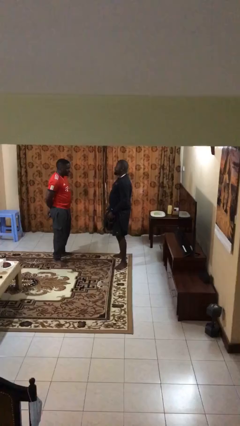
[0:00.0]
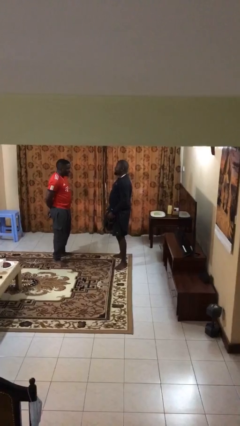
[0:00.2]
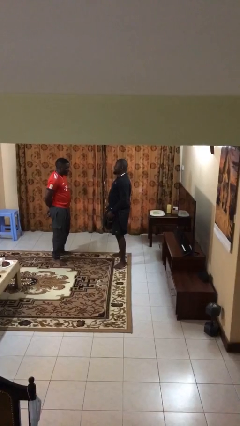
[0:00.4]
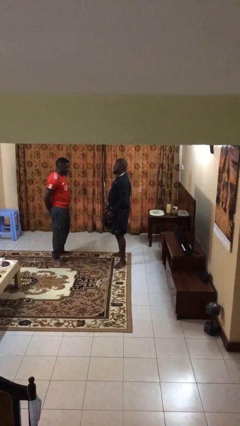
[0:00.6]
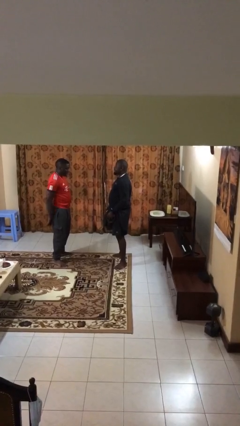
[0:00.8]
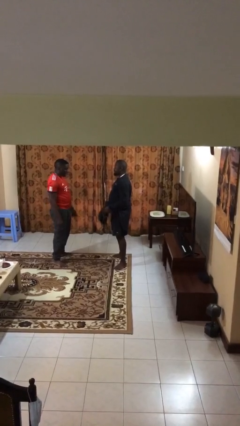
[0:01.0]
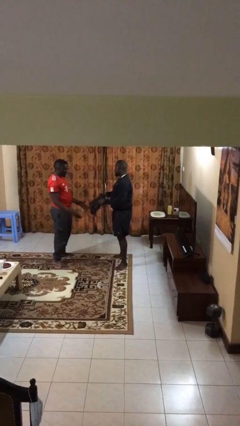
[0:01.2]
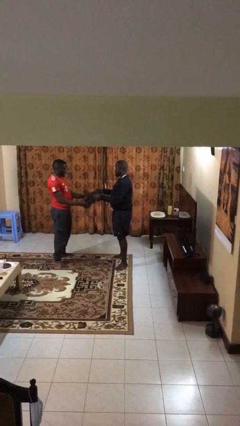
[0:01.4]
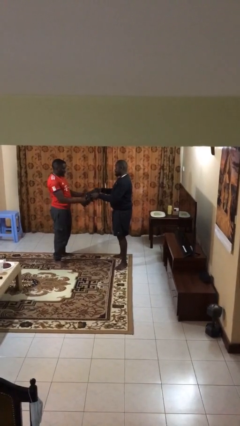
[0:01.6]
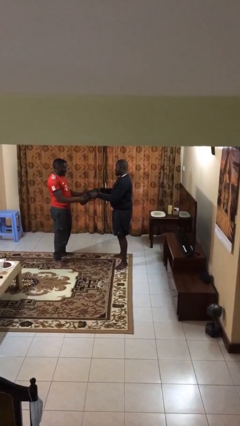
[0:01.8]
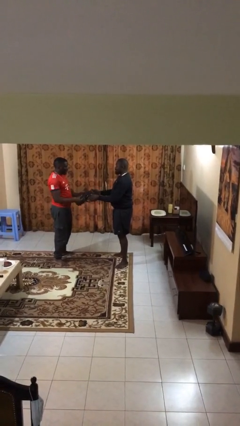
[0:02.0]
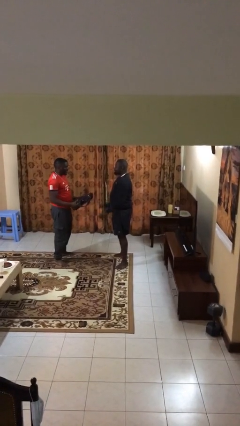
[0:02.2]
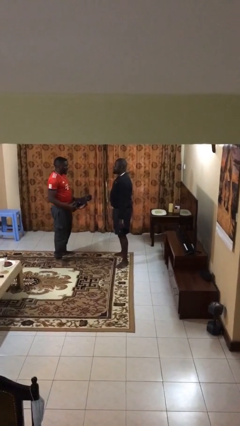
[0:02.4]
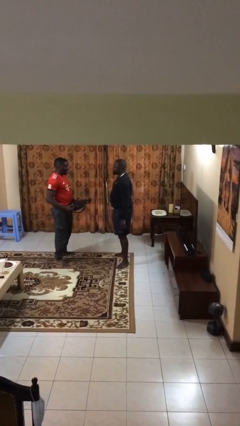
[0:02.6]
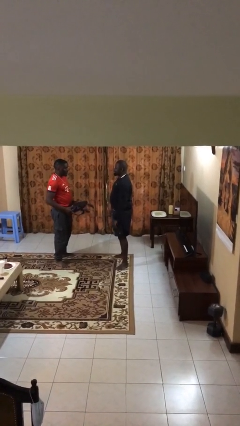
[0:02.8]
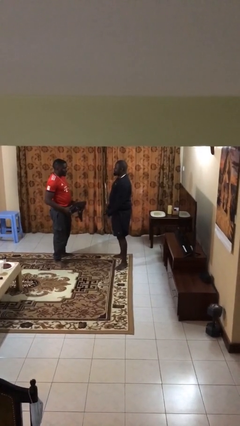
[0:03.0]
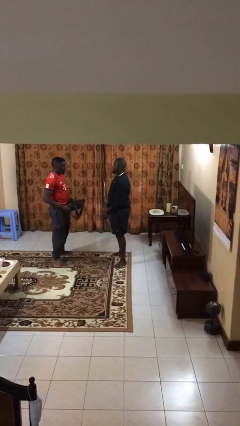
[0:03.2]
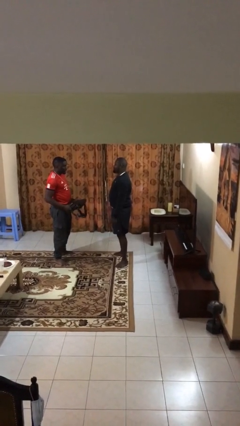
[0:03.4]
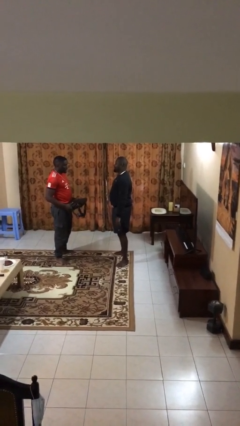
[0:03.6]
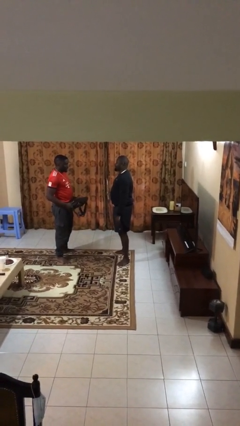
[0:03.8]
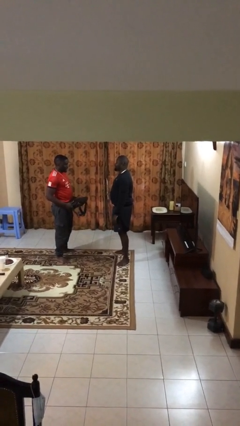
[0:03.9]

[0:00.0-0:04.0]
person transfers object to person

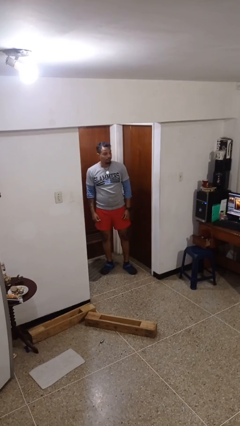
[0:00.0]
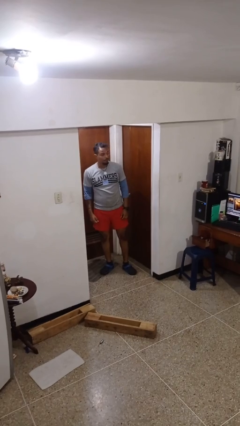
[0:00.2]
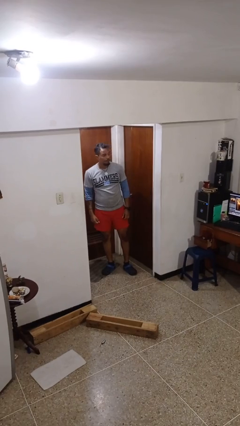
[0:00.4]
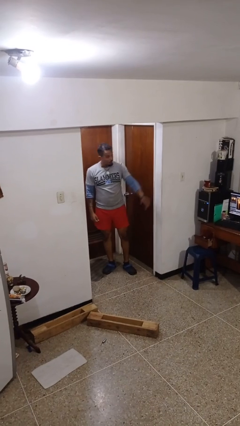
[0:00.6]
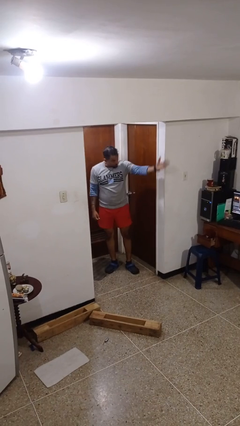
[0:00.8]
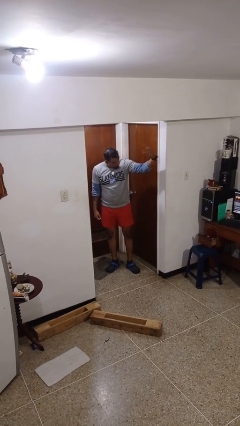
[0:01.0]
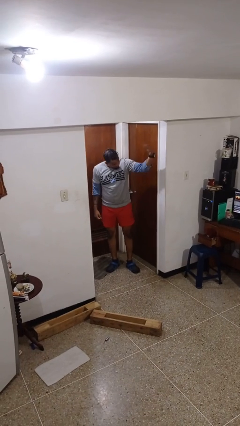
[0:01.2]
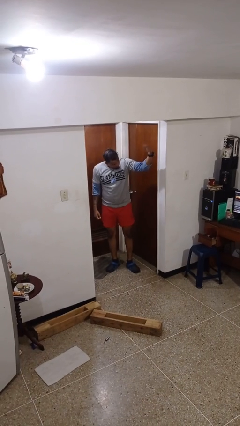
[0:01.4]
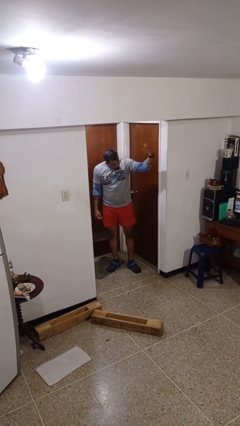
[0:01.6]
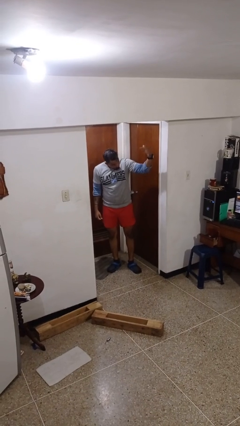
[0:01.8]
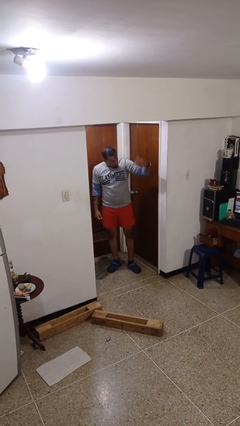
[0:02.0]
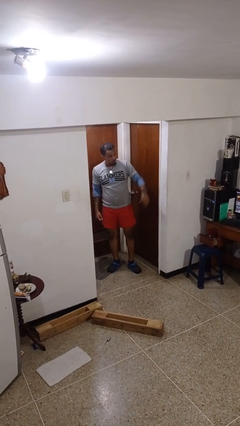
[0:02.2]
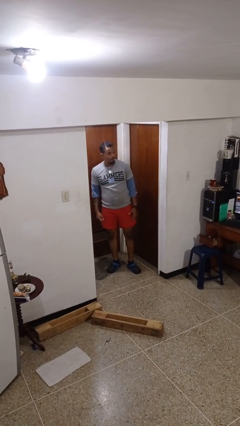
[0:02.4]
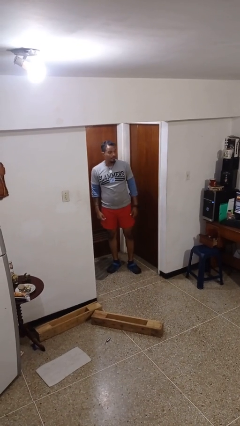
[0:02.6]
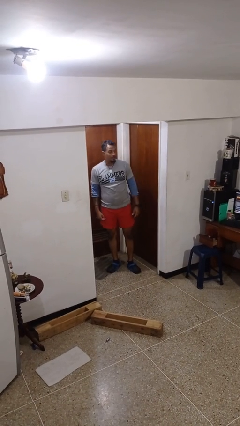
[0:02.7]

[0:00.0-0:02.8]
person gestures come here

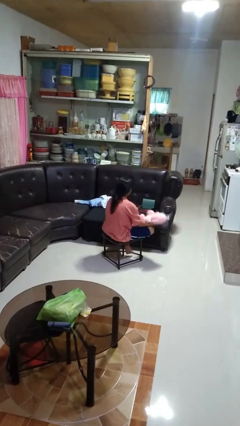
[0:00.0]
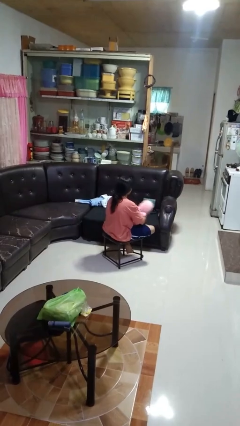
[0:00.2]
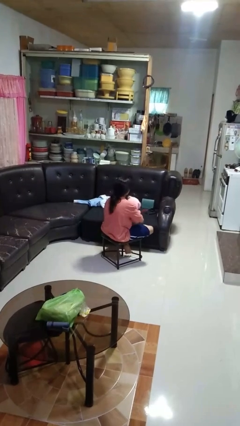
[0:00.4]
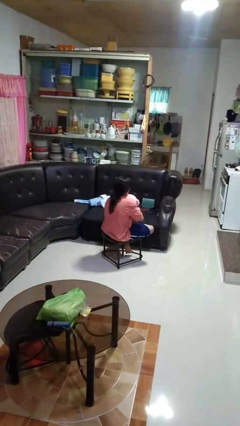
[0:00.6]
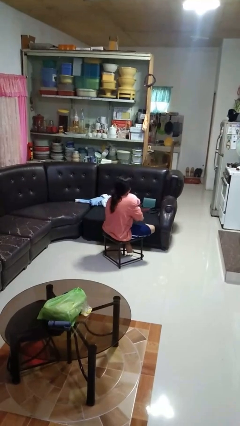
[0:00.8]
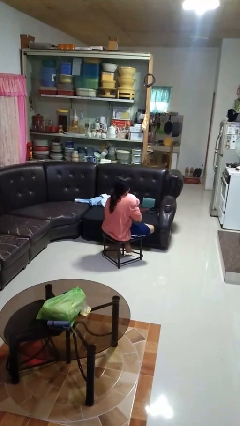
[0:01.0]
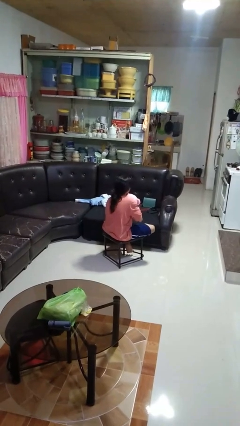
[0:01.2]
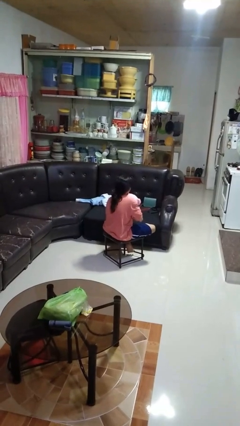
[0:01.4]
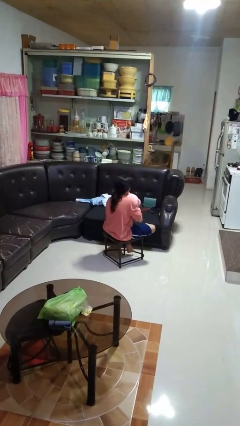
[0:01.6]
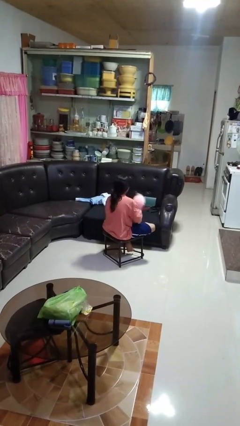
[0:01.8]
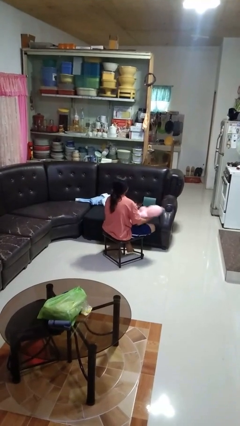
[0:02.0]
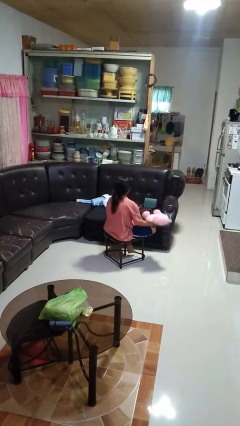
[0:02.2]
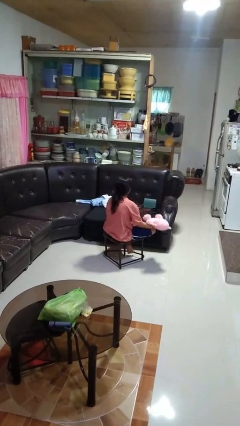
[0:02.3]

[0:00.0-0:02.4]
person hugs stuffed animal

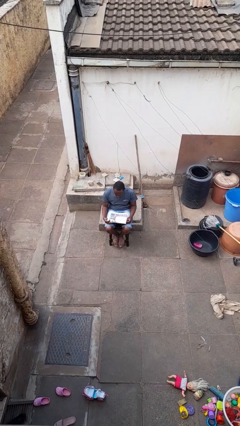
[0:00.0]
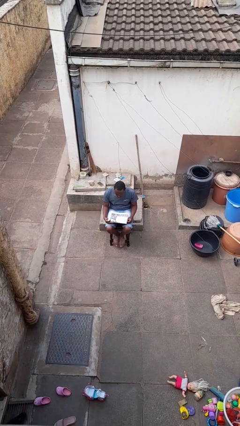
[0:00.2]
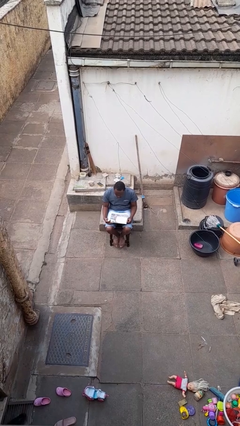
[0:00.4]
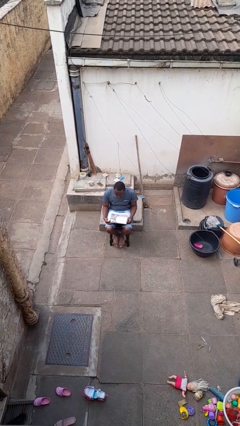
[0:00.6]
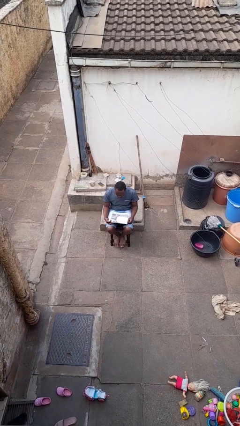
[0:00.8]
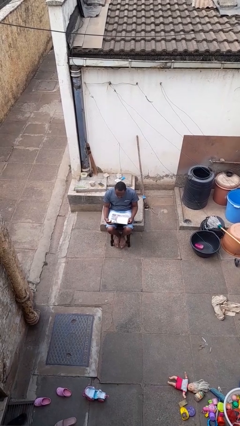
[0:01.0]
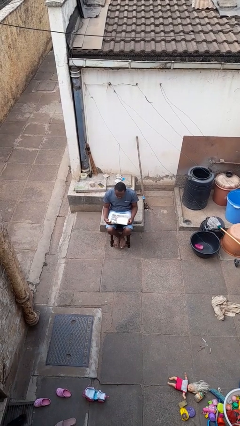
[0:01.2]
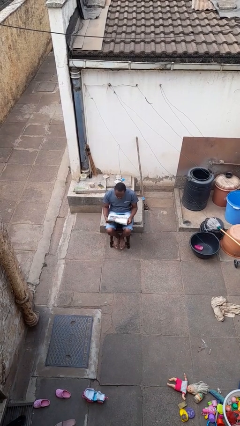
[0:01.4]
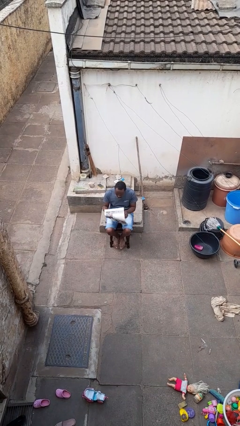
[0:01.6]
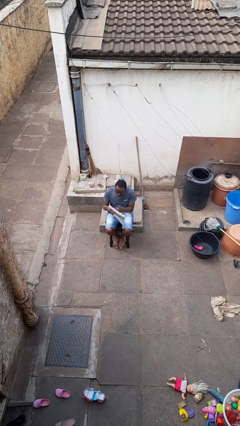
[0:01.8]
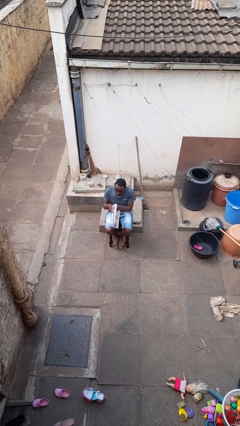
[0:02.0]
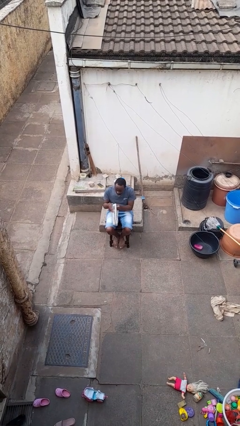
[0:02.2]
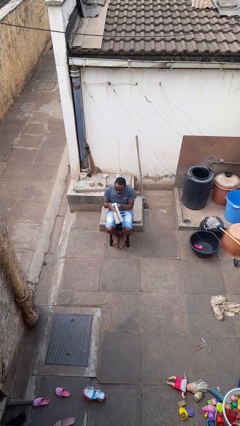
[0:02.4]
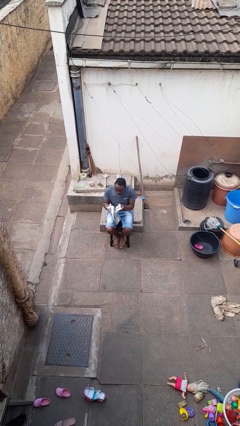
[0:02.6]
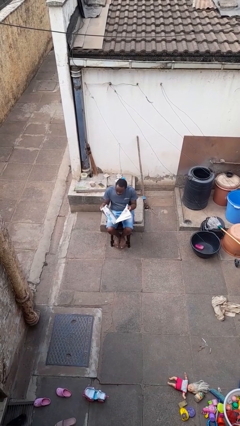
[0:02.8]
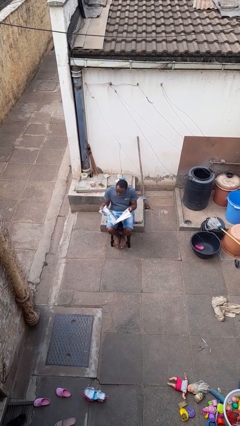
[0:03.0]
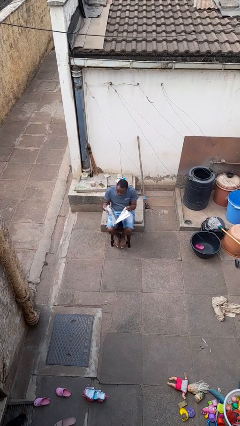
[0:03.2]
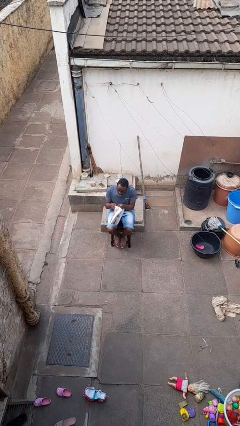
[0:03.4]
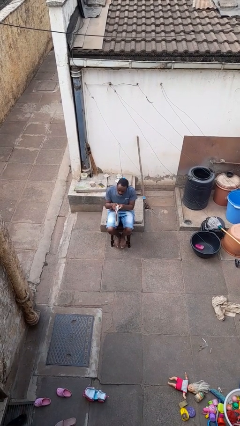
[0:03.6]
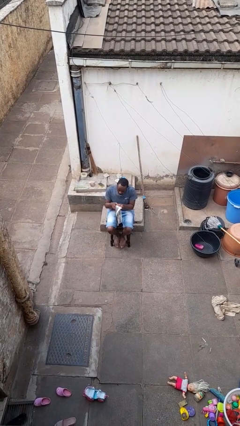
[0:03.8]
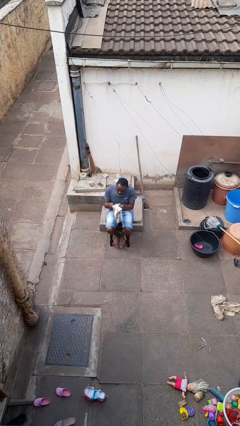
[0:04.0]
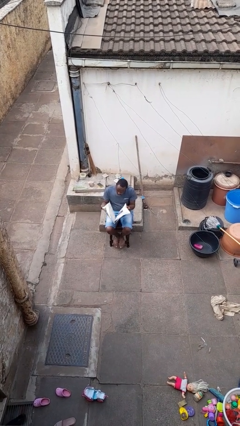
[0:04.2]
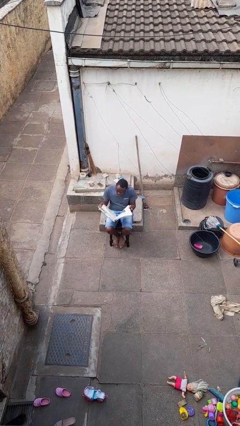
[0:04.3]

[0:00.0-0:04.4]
person reads newspaper

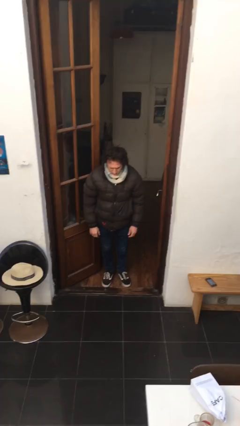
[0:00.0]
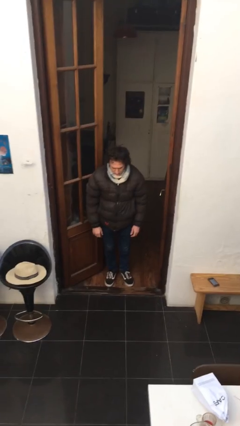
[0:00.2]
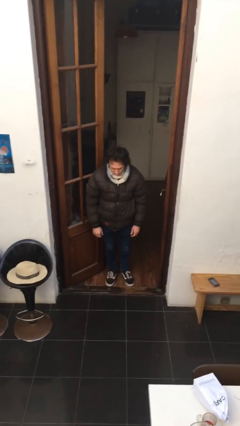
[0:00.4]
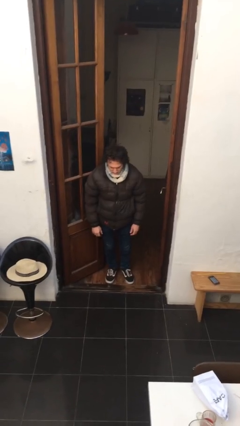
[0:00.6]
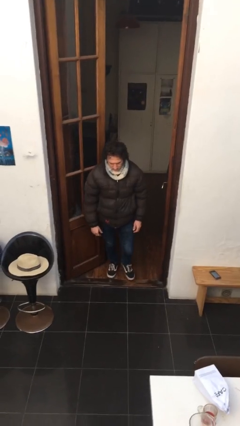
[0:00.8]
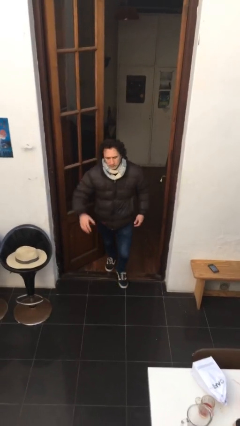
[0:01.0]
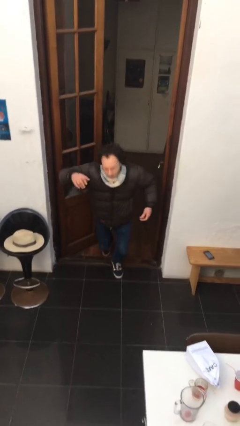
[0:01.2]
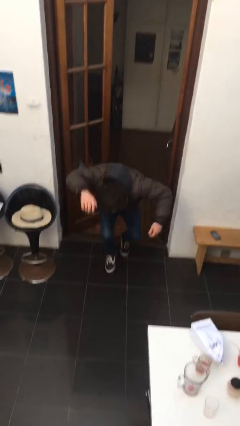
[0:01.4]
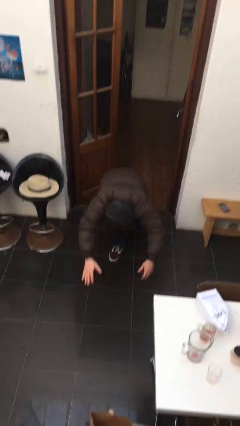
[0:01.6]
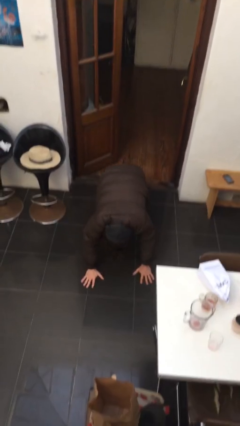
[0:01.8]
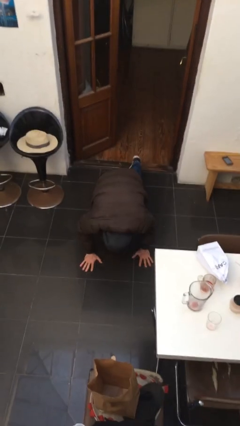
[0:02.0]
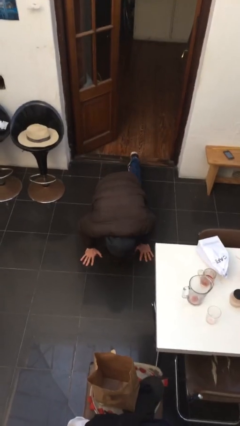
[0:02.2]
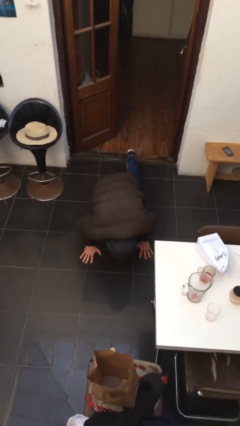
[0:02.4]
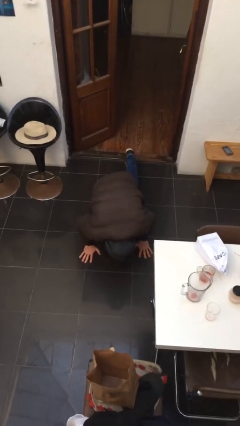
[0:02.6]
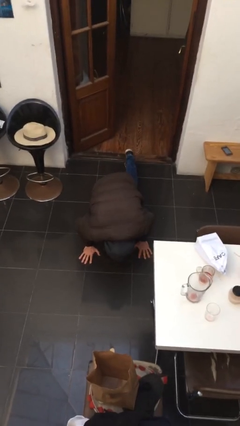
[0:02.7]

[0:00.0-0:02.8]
person trips on object on floor

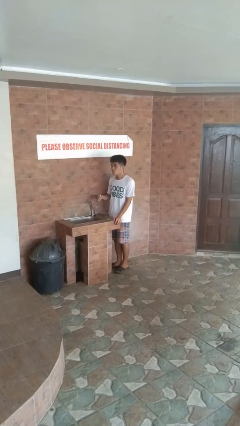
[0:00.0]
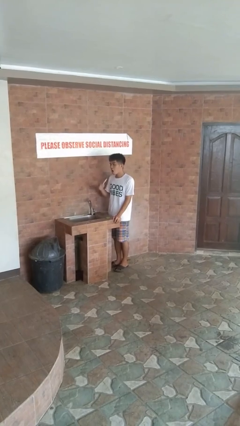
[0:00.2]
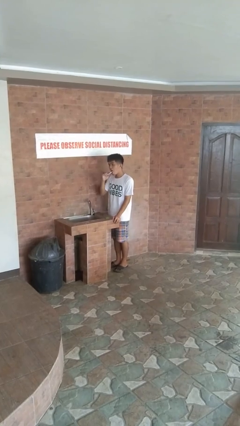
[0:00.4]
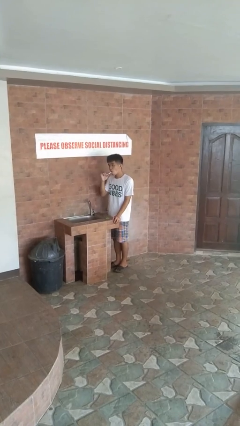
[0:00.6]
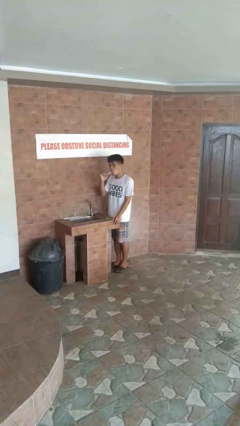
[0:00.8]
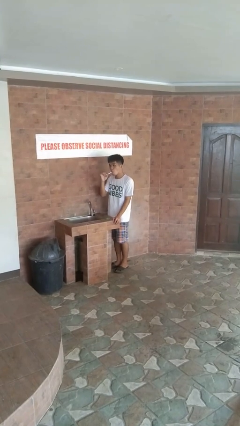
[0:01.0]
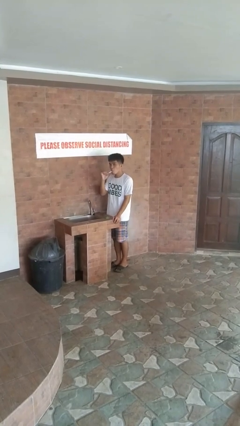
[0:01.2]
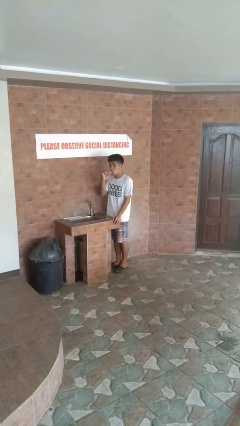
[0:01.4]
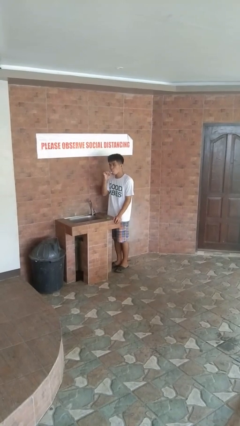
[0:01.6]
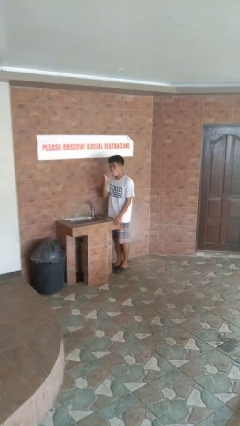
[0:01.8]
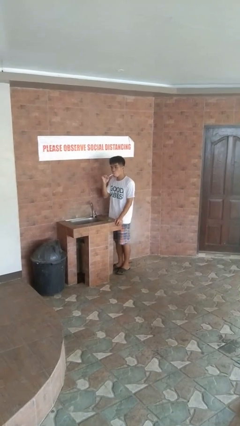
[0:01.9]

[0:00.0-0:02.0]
person brushes teeth
